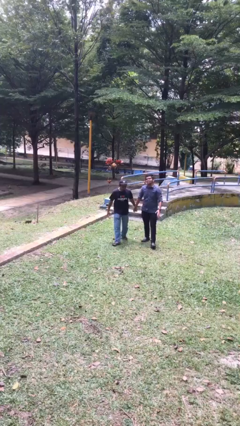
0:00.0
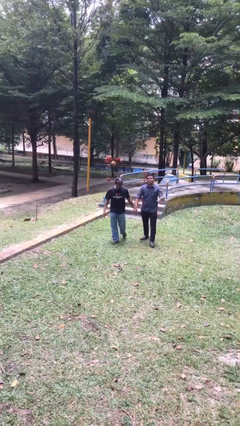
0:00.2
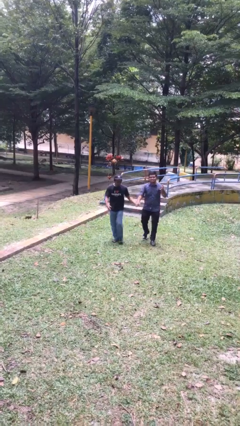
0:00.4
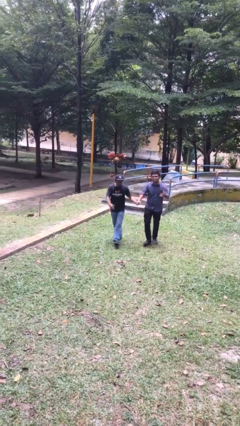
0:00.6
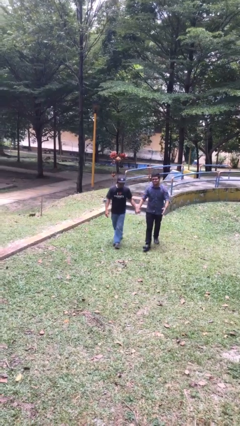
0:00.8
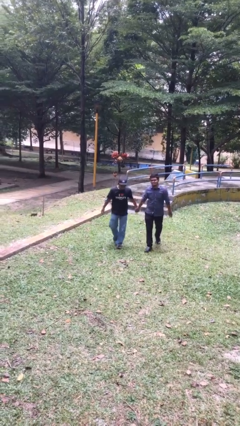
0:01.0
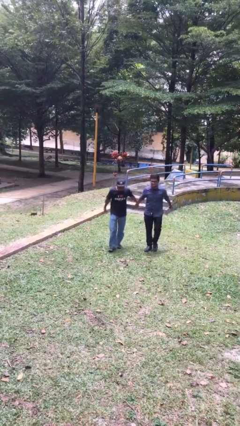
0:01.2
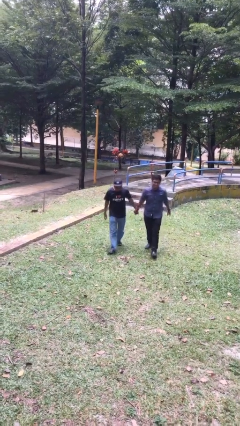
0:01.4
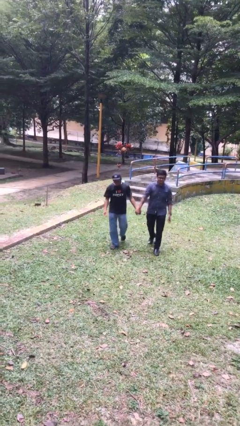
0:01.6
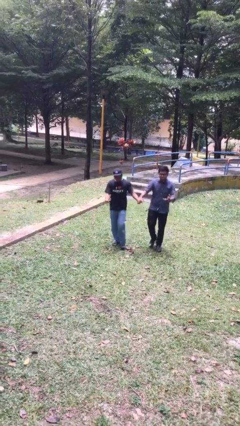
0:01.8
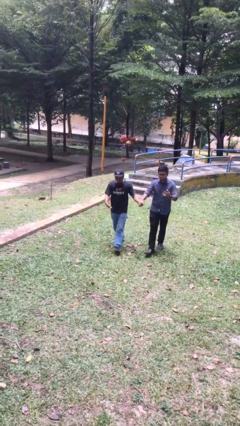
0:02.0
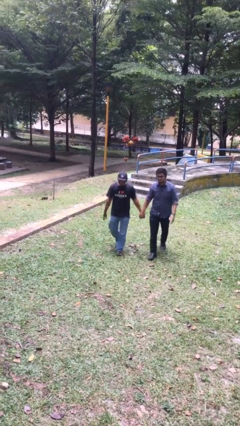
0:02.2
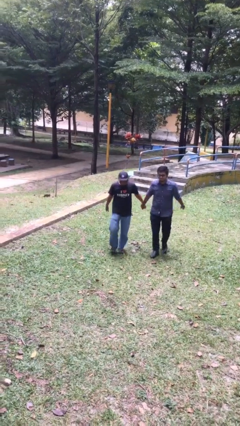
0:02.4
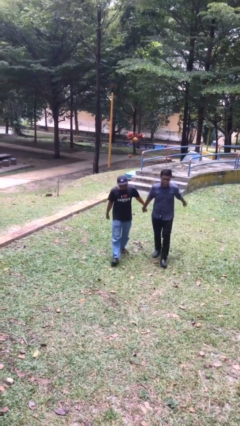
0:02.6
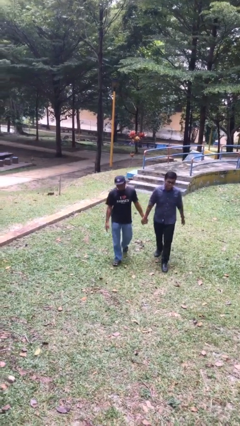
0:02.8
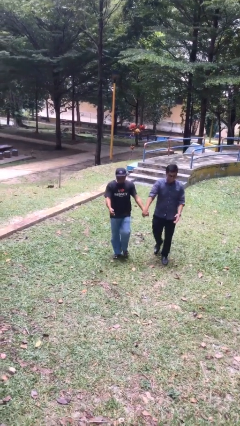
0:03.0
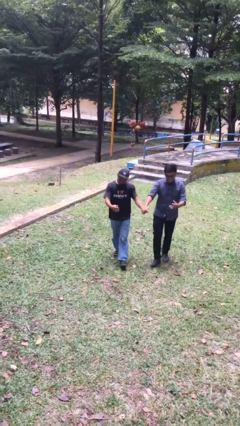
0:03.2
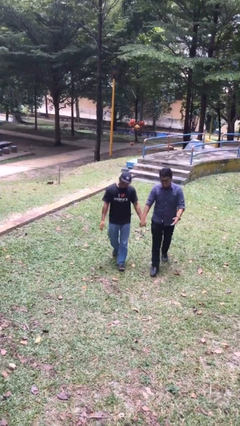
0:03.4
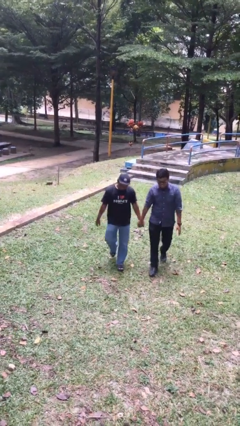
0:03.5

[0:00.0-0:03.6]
person holds hand

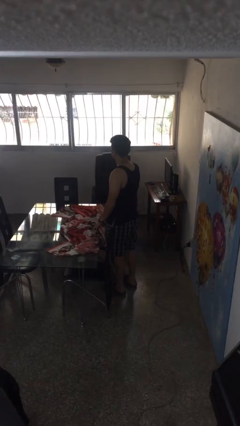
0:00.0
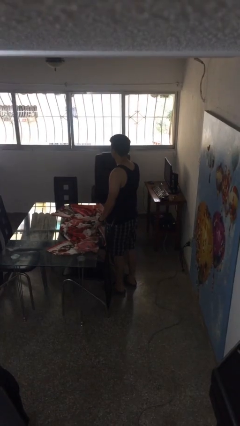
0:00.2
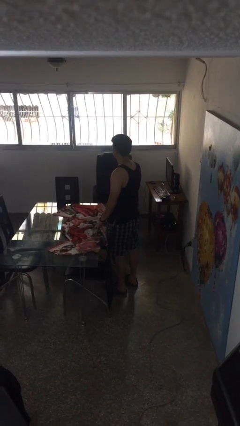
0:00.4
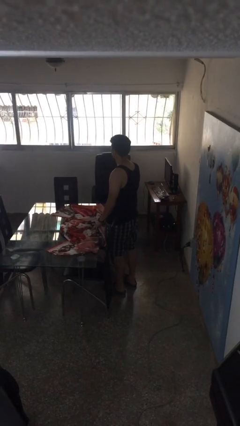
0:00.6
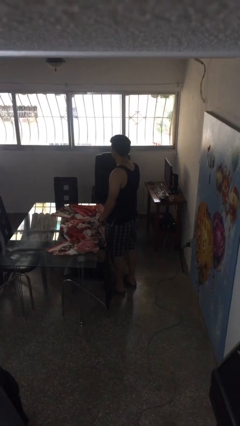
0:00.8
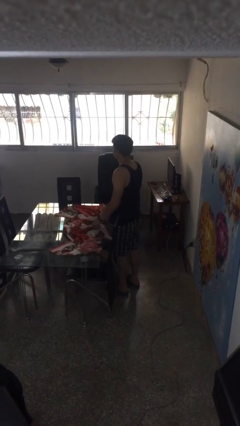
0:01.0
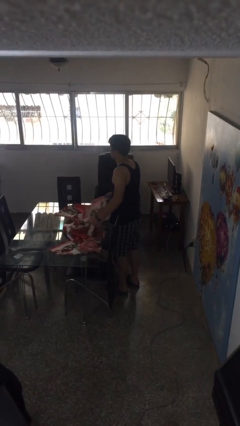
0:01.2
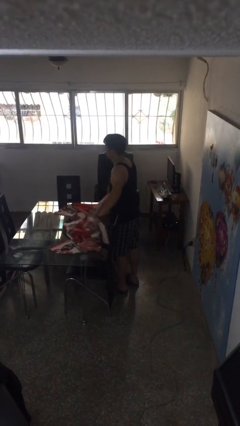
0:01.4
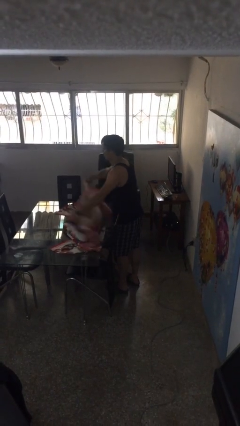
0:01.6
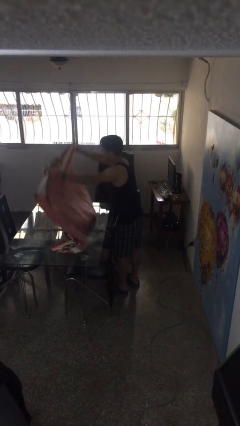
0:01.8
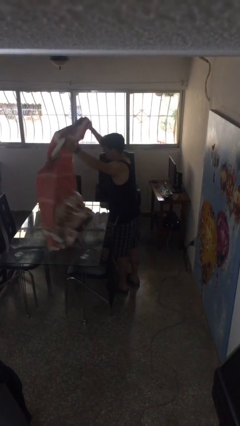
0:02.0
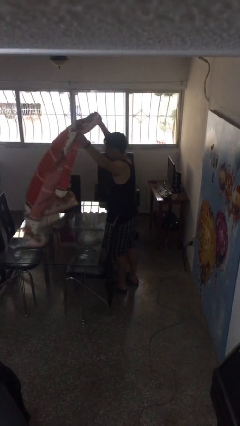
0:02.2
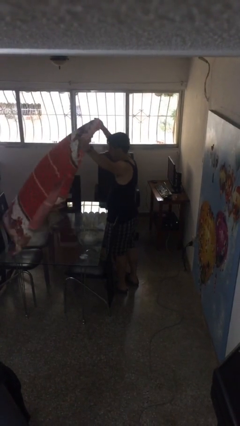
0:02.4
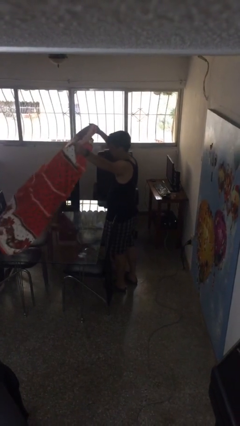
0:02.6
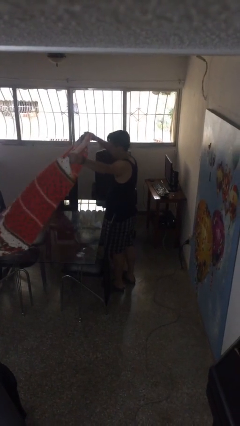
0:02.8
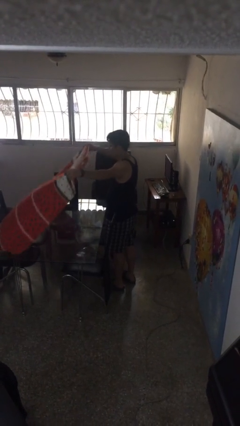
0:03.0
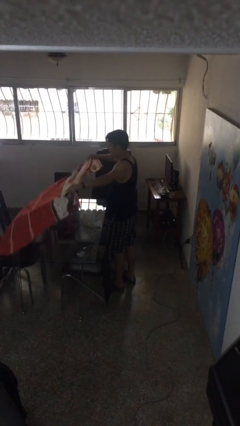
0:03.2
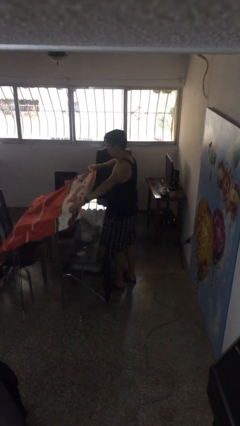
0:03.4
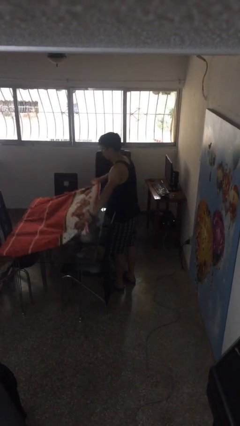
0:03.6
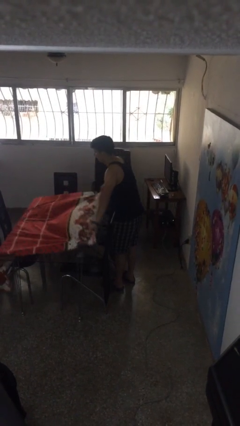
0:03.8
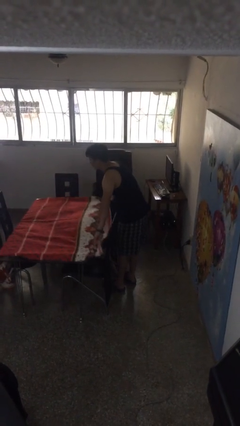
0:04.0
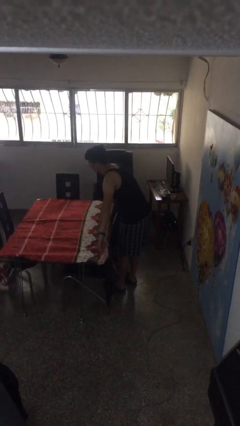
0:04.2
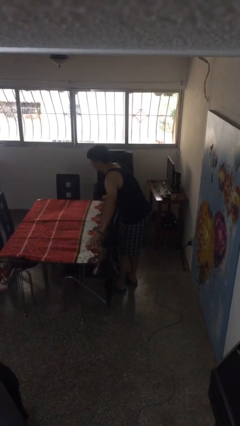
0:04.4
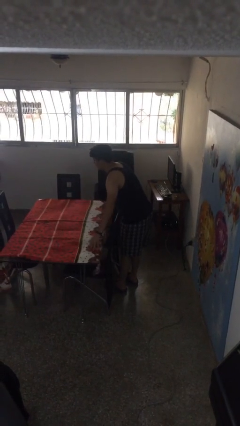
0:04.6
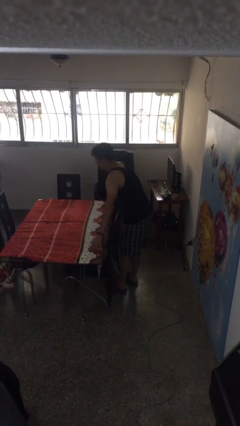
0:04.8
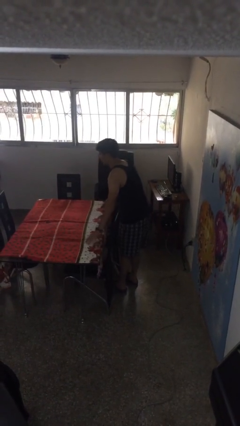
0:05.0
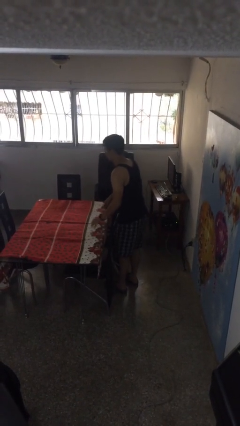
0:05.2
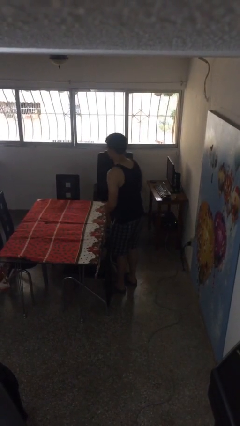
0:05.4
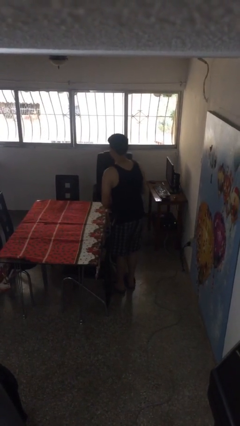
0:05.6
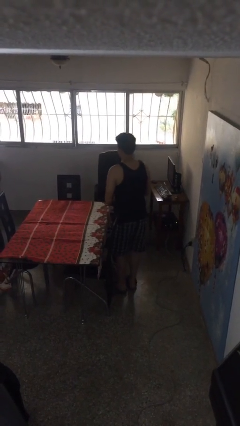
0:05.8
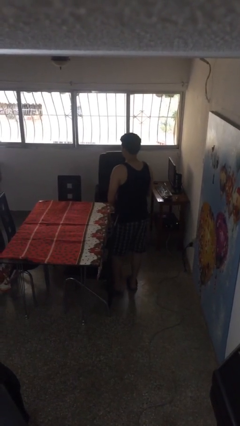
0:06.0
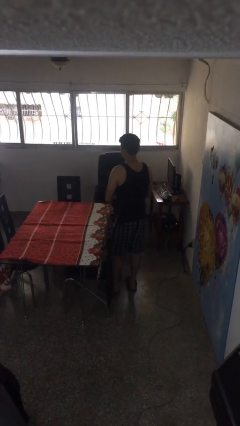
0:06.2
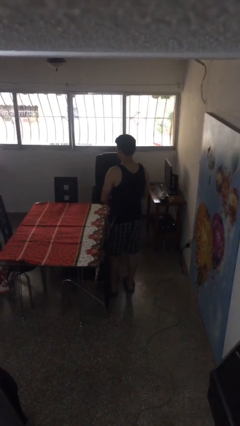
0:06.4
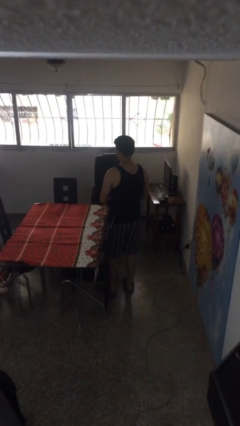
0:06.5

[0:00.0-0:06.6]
person spreads tablecloth

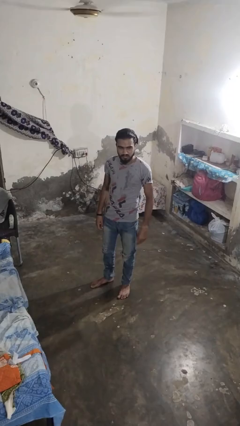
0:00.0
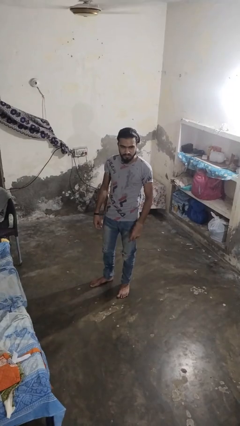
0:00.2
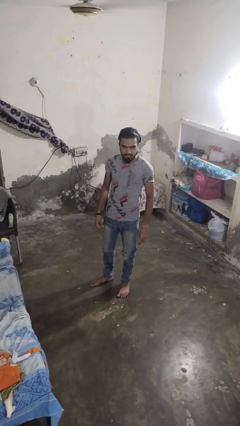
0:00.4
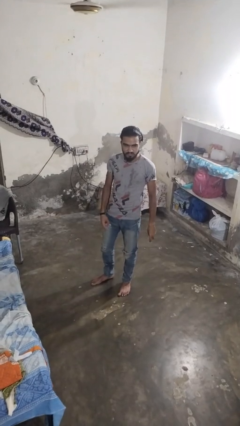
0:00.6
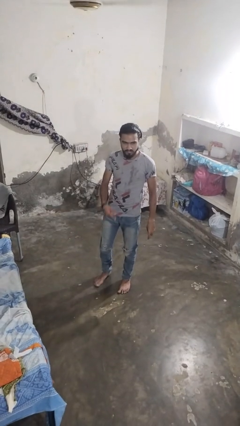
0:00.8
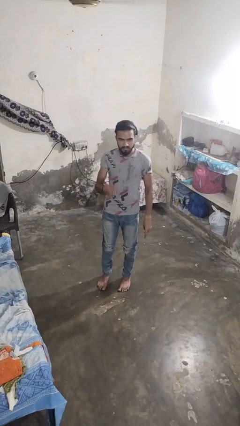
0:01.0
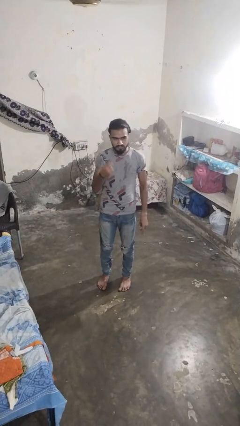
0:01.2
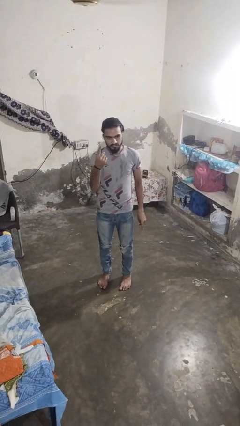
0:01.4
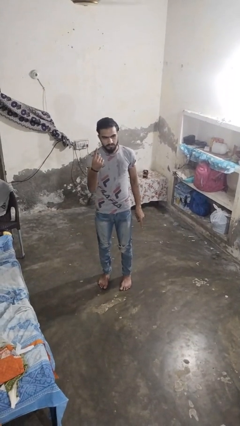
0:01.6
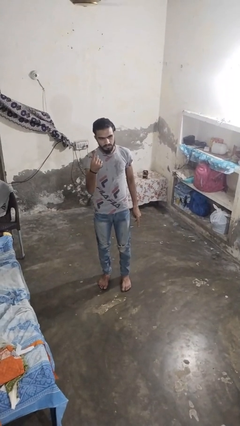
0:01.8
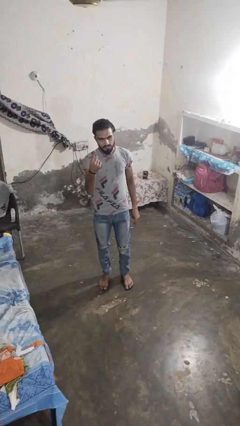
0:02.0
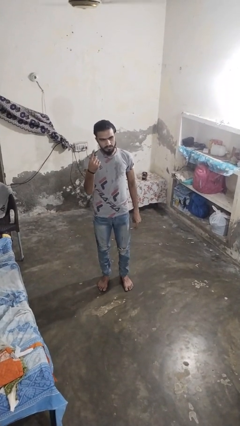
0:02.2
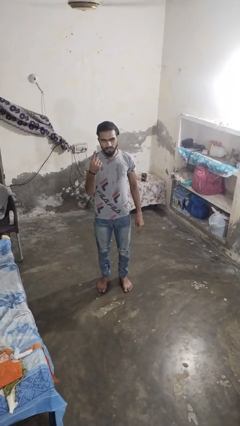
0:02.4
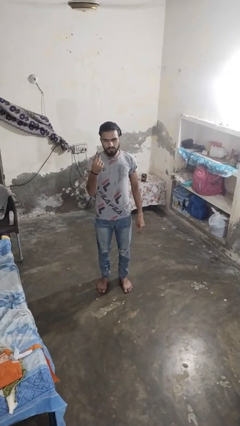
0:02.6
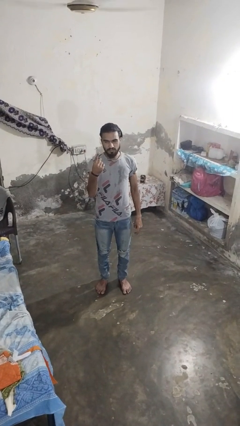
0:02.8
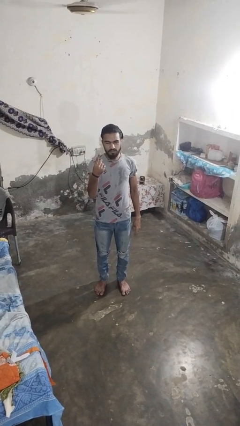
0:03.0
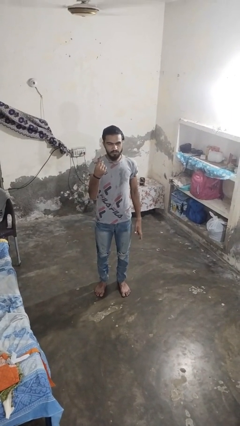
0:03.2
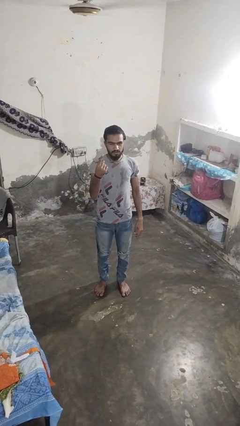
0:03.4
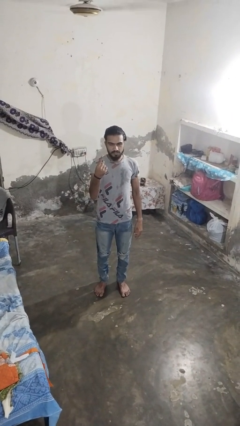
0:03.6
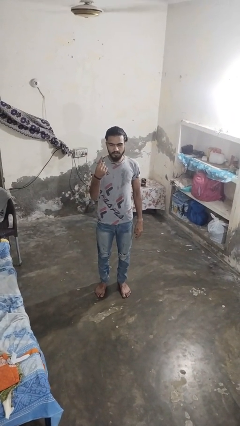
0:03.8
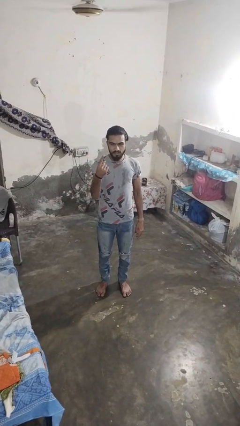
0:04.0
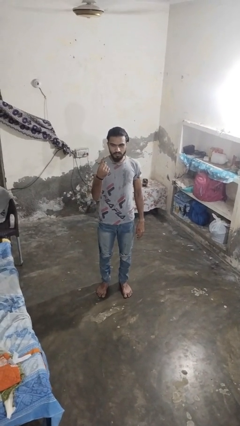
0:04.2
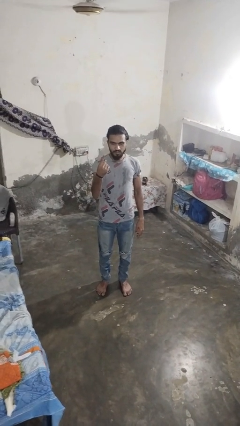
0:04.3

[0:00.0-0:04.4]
person gestures number one

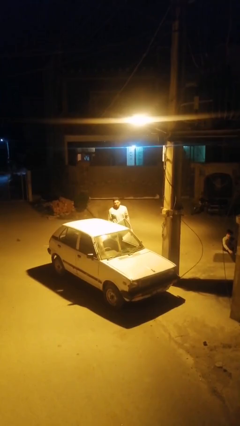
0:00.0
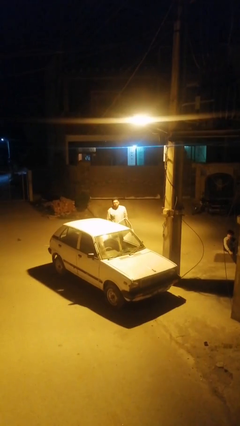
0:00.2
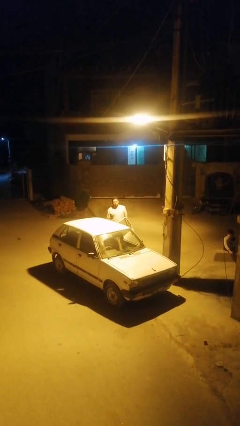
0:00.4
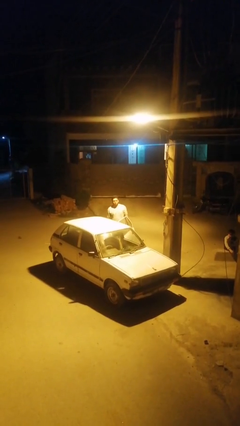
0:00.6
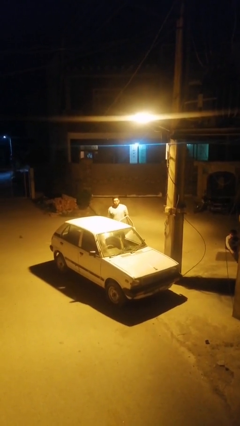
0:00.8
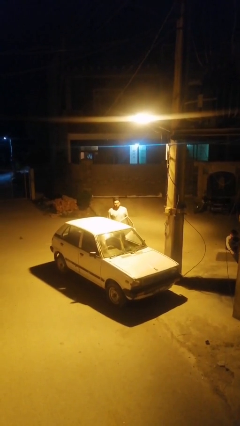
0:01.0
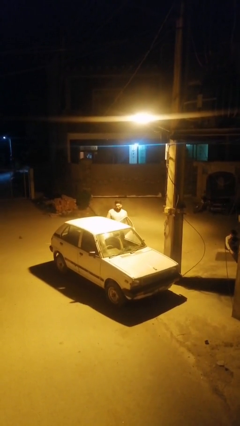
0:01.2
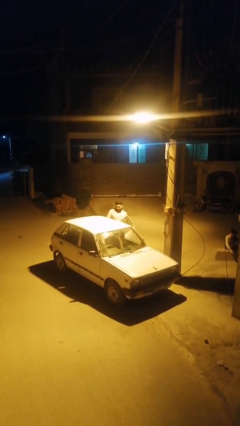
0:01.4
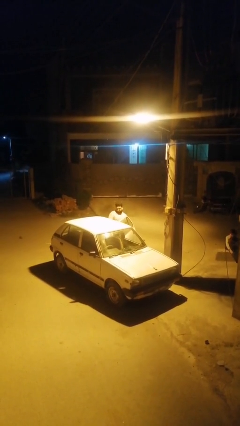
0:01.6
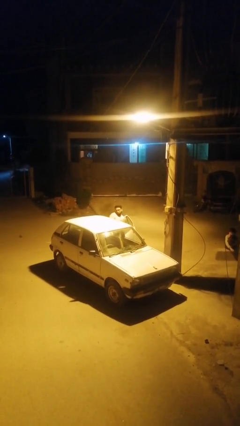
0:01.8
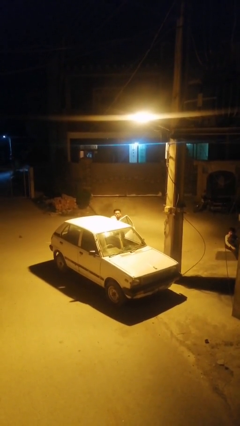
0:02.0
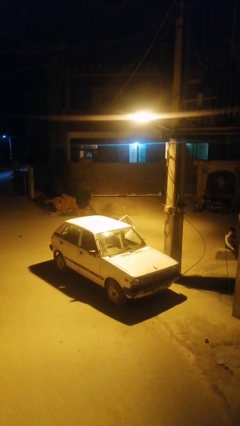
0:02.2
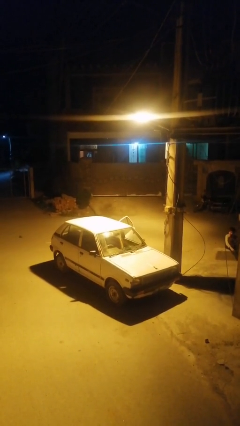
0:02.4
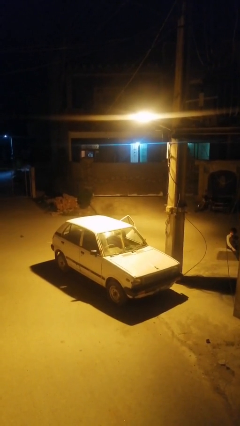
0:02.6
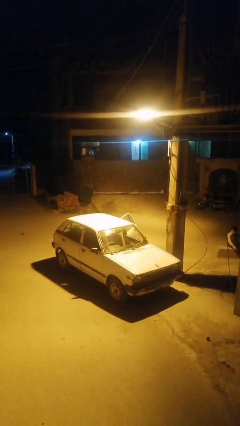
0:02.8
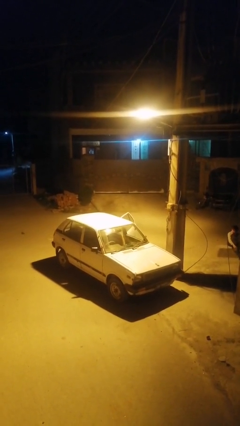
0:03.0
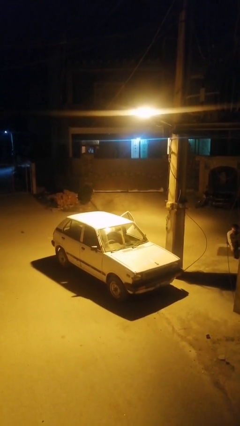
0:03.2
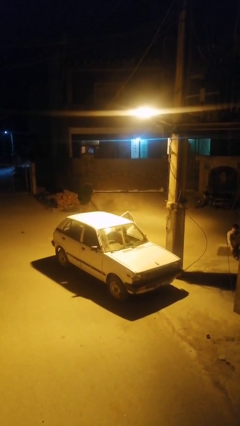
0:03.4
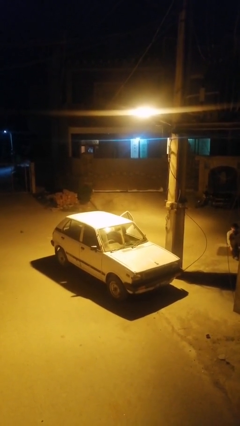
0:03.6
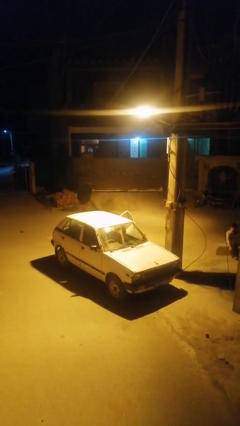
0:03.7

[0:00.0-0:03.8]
person enters car
